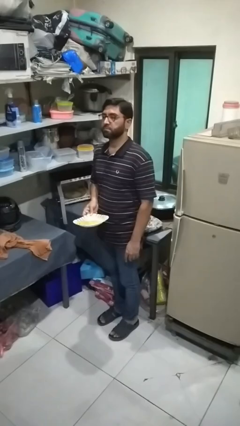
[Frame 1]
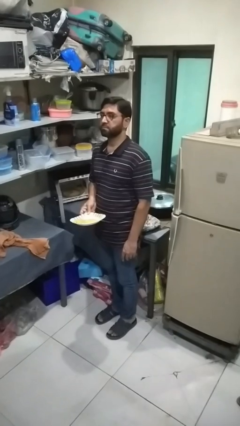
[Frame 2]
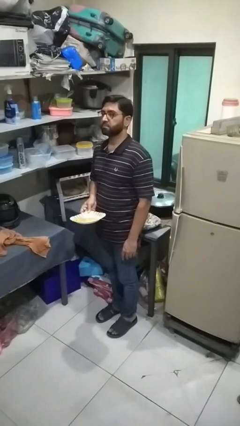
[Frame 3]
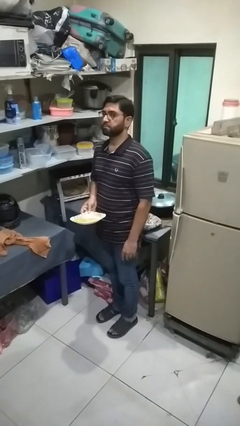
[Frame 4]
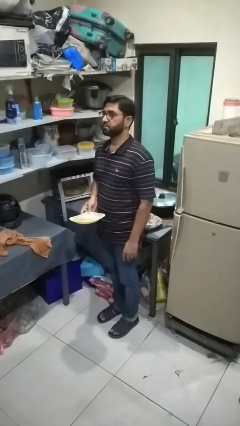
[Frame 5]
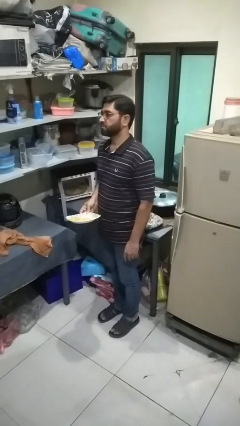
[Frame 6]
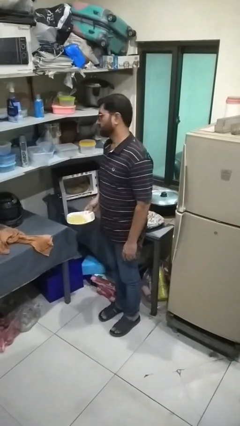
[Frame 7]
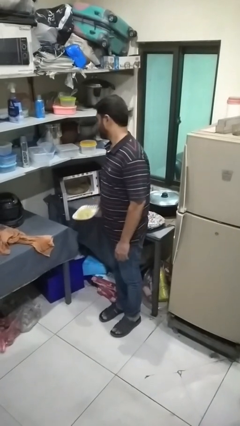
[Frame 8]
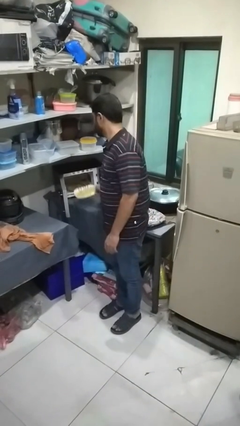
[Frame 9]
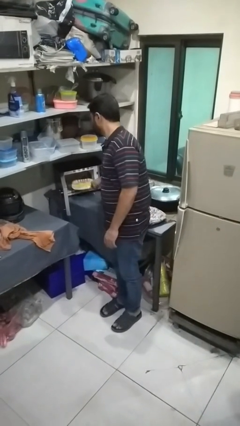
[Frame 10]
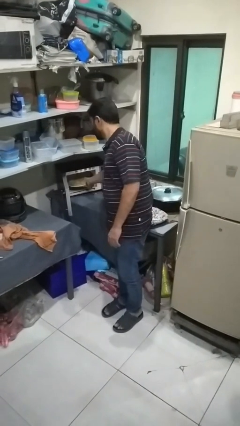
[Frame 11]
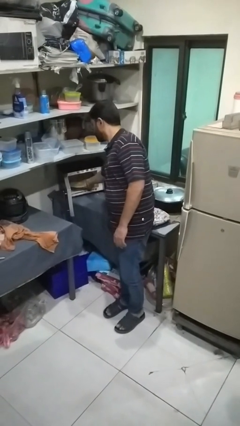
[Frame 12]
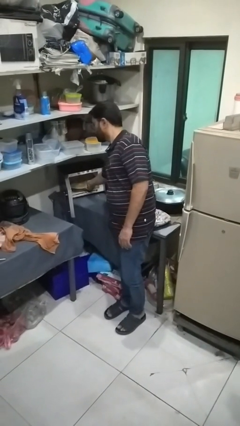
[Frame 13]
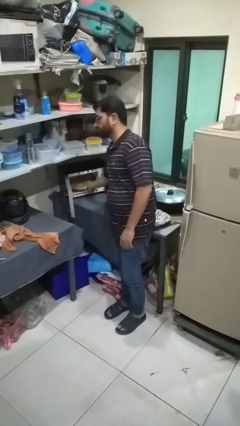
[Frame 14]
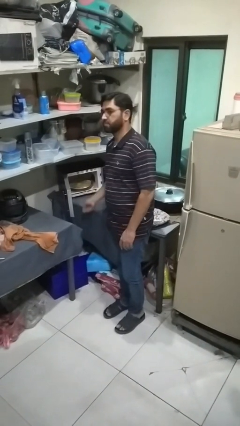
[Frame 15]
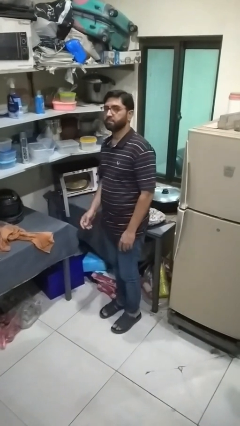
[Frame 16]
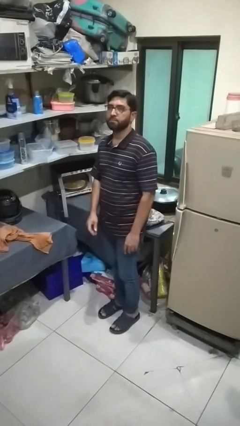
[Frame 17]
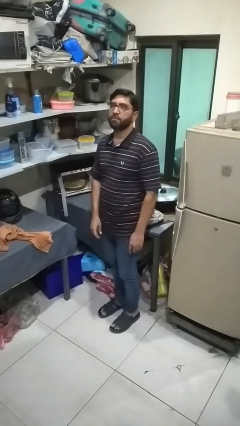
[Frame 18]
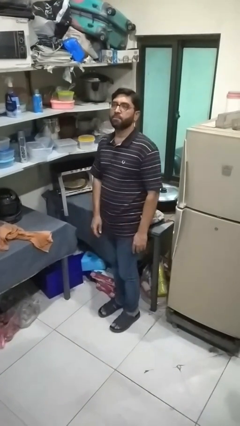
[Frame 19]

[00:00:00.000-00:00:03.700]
person puts object into microwave

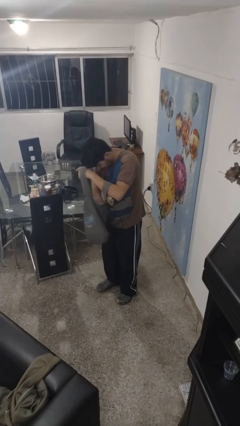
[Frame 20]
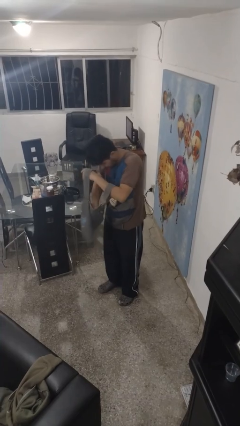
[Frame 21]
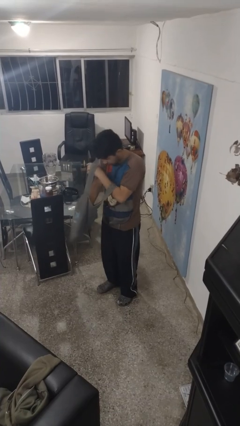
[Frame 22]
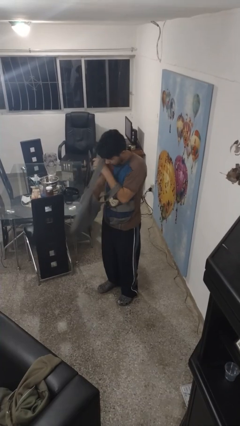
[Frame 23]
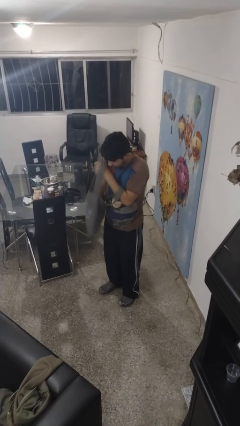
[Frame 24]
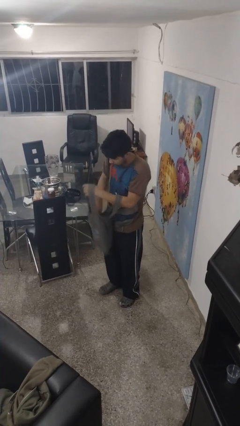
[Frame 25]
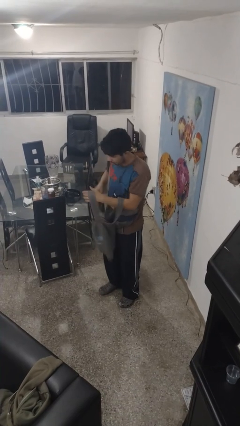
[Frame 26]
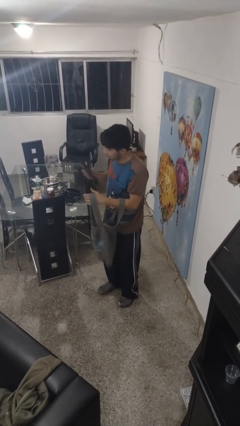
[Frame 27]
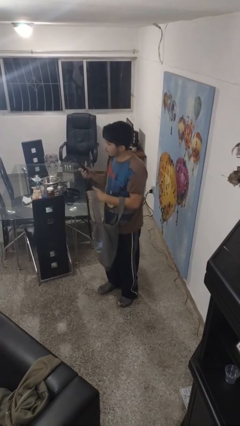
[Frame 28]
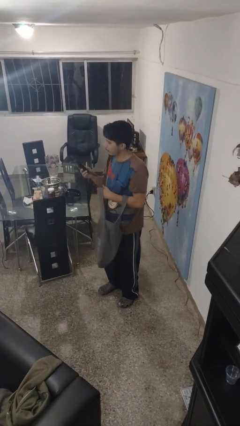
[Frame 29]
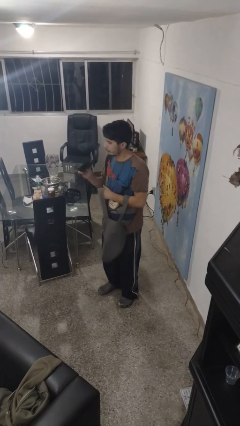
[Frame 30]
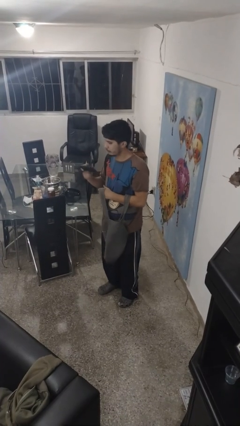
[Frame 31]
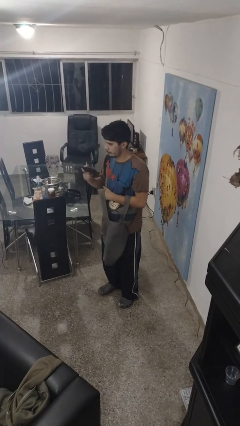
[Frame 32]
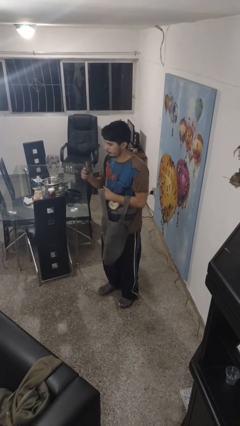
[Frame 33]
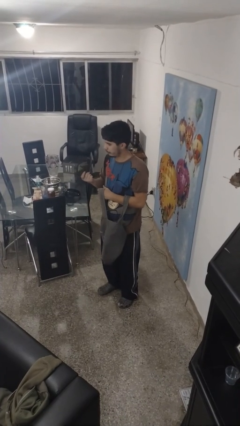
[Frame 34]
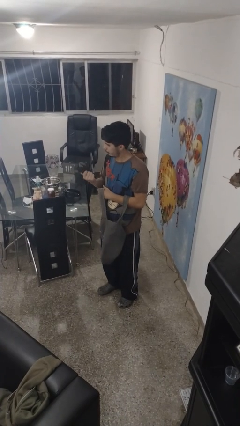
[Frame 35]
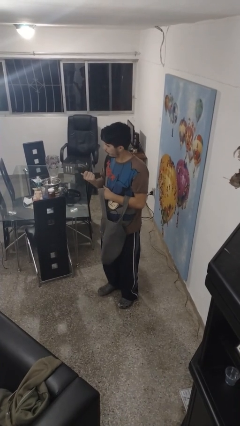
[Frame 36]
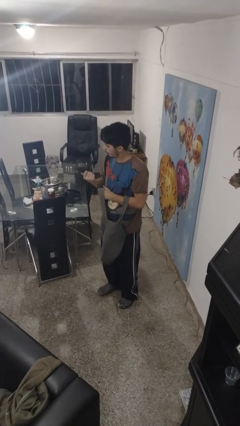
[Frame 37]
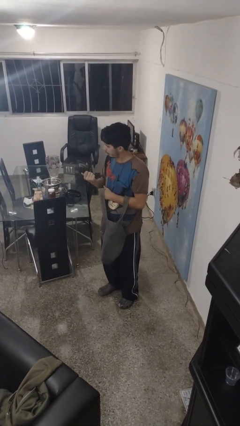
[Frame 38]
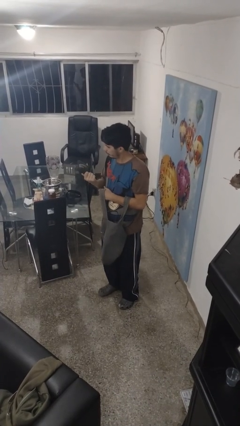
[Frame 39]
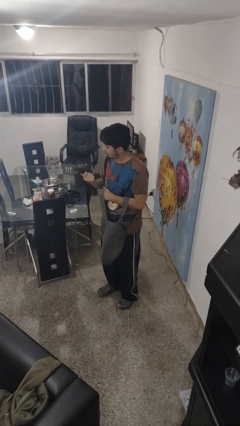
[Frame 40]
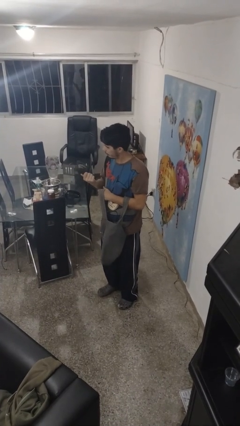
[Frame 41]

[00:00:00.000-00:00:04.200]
person takes object from purse

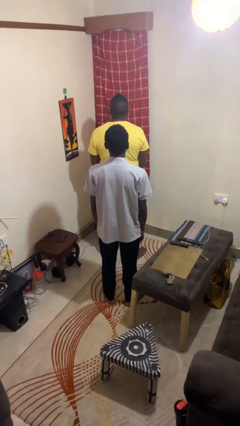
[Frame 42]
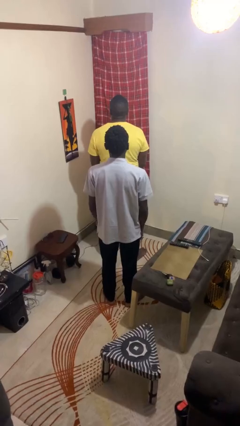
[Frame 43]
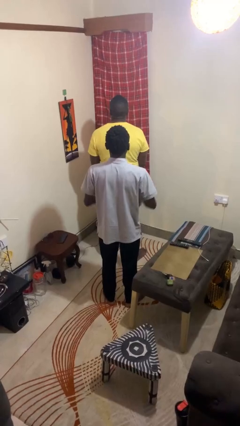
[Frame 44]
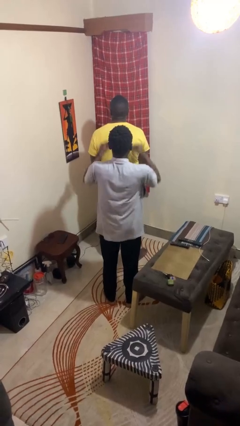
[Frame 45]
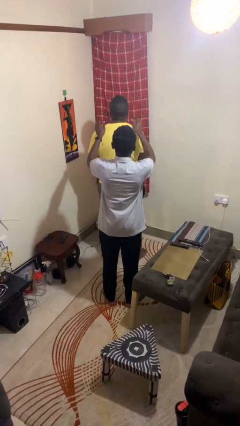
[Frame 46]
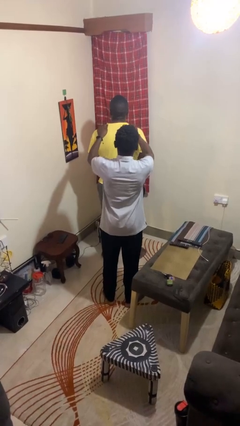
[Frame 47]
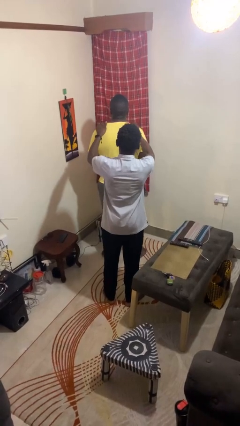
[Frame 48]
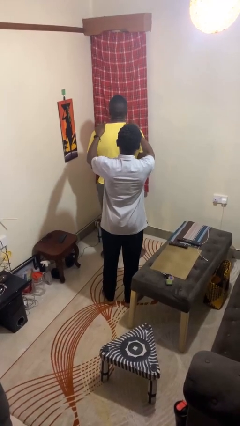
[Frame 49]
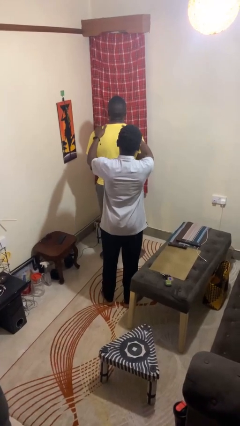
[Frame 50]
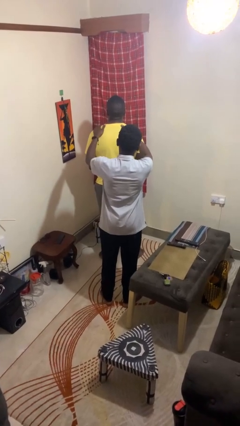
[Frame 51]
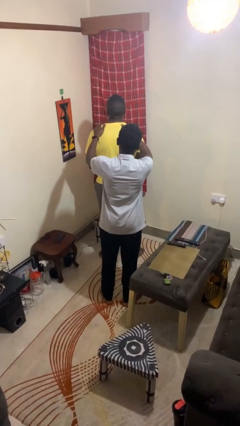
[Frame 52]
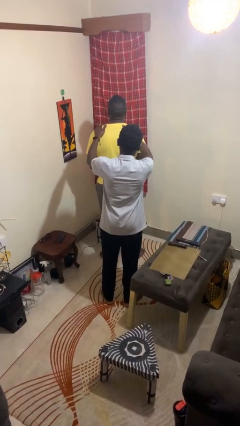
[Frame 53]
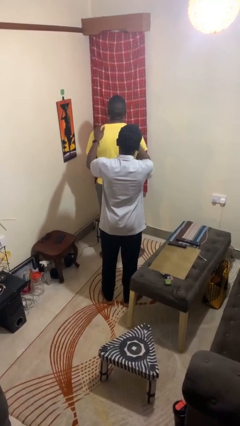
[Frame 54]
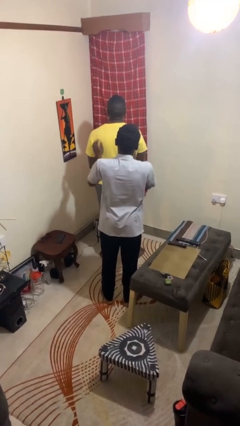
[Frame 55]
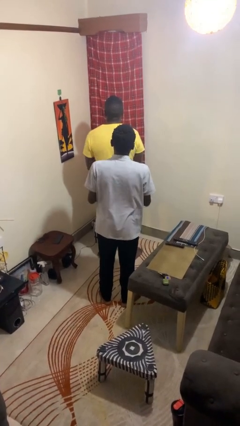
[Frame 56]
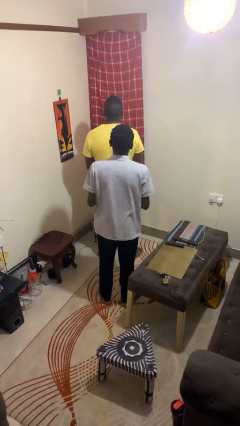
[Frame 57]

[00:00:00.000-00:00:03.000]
person touches back of person

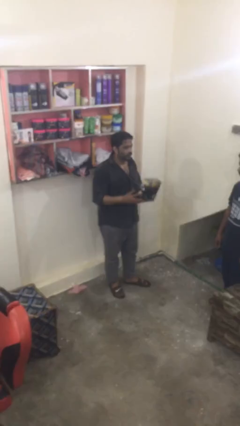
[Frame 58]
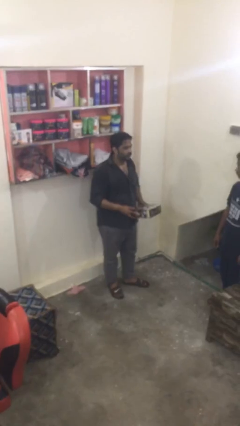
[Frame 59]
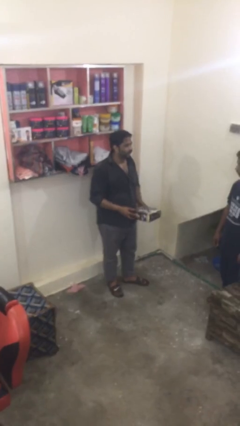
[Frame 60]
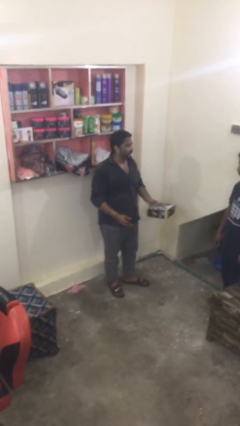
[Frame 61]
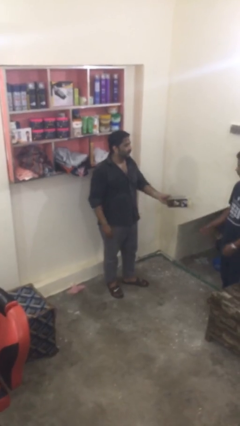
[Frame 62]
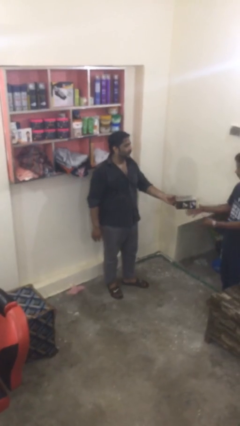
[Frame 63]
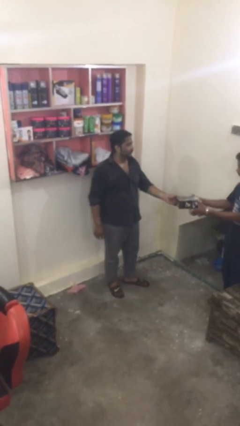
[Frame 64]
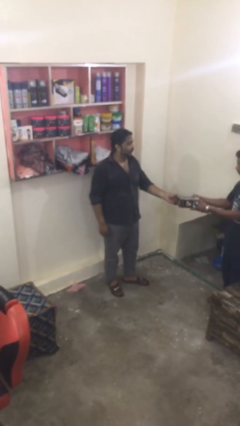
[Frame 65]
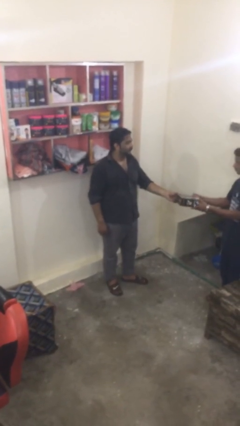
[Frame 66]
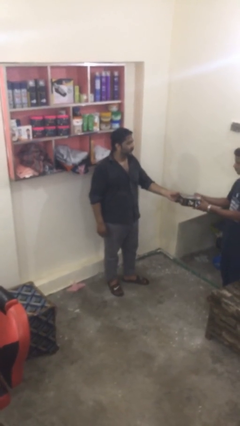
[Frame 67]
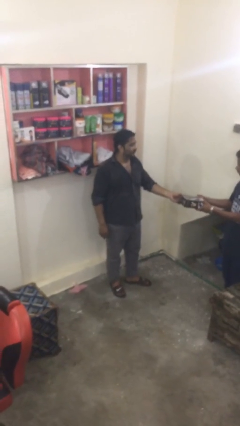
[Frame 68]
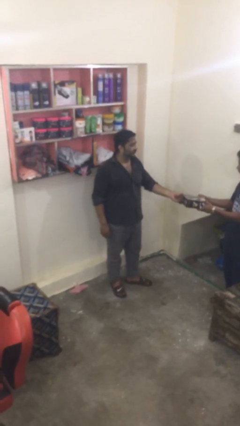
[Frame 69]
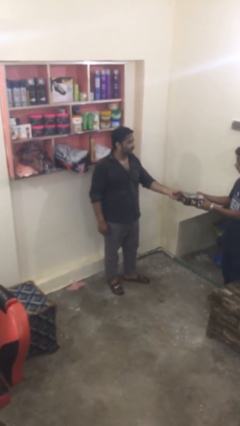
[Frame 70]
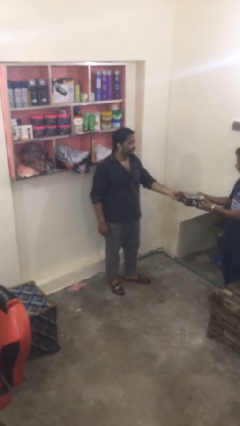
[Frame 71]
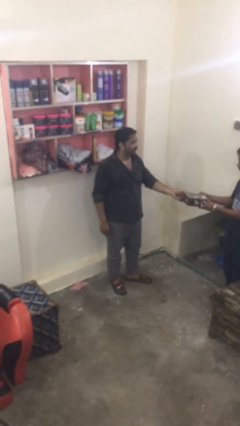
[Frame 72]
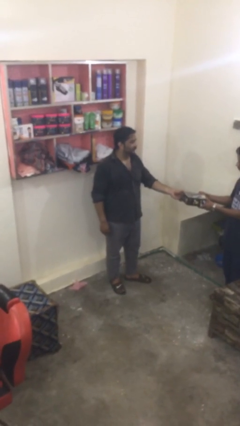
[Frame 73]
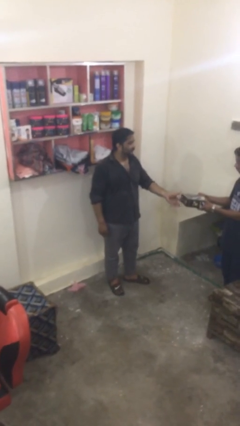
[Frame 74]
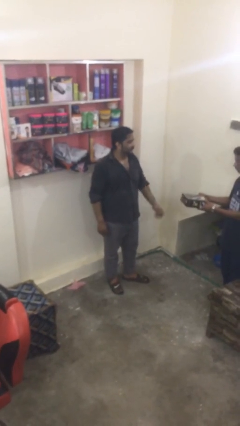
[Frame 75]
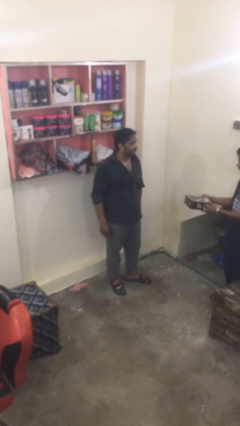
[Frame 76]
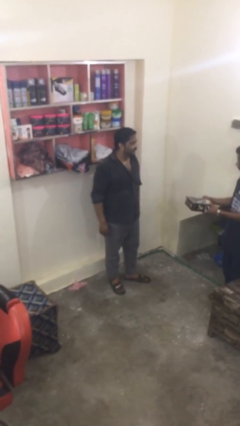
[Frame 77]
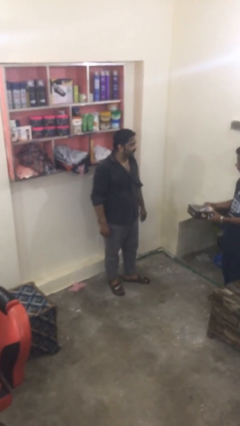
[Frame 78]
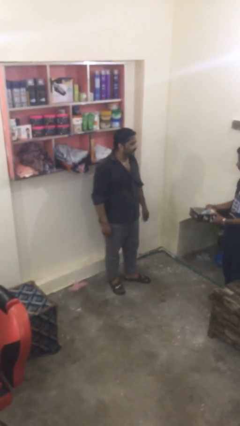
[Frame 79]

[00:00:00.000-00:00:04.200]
person transfers object to person

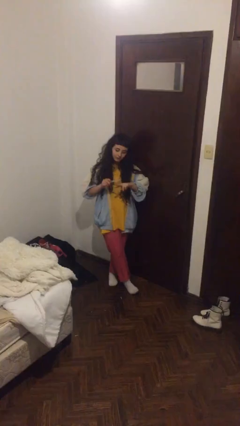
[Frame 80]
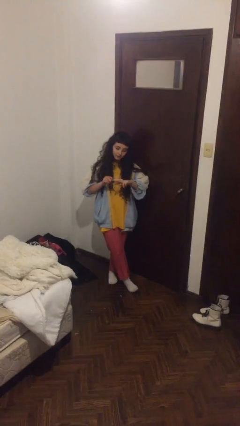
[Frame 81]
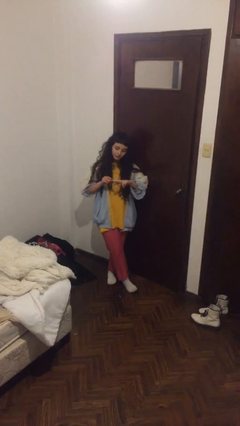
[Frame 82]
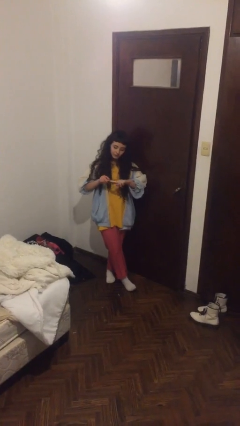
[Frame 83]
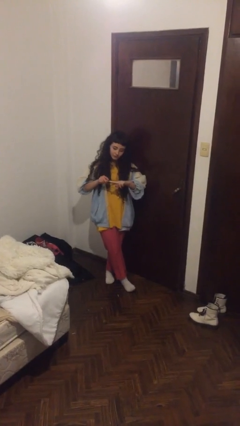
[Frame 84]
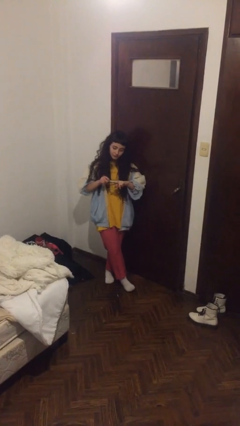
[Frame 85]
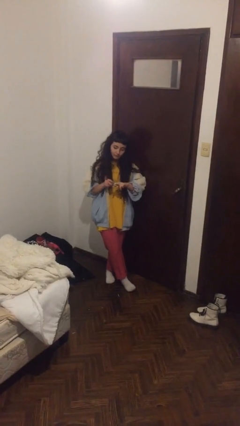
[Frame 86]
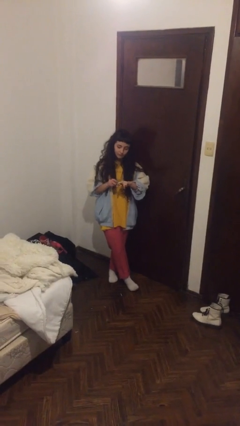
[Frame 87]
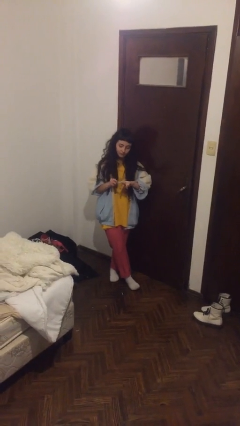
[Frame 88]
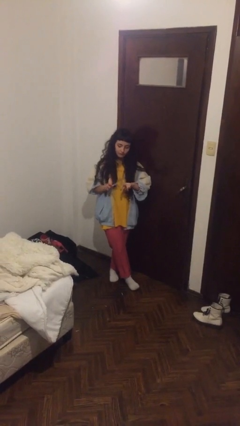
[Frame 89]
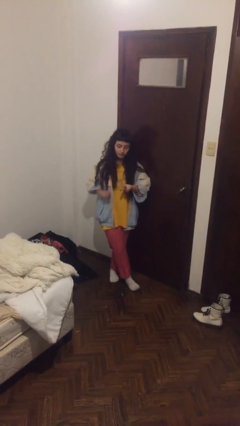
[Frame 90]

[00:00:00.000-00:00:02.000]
person files fingernails

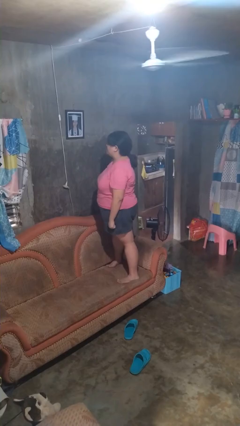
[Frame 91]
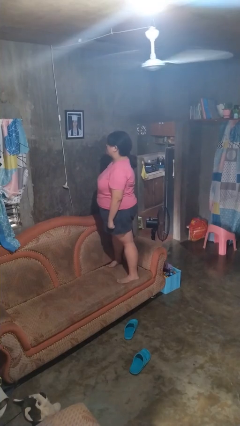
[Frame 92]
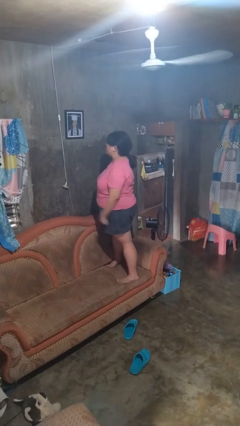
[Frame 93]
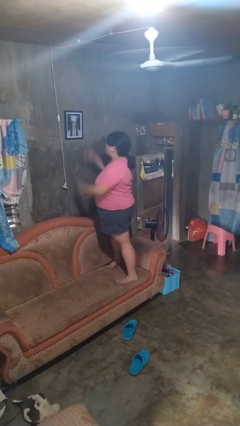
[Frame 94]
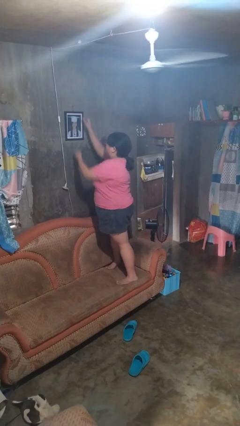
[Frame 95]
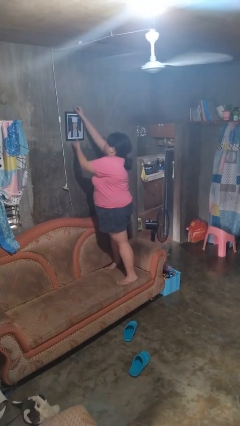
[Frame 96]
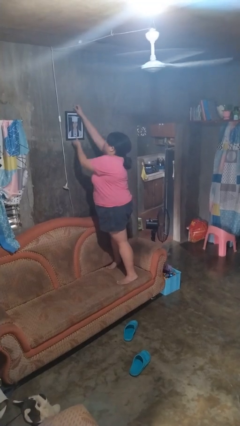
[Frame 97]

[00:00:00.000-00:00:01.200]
person takes down picture frame
